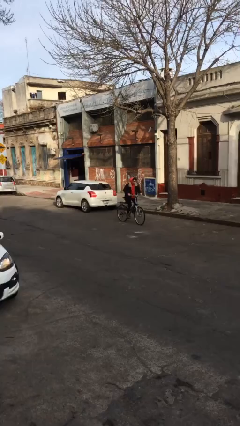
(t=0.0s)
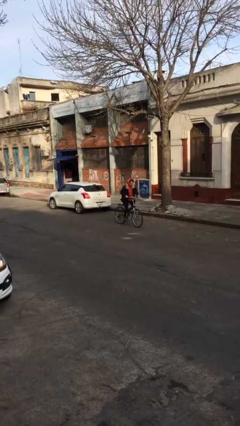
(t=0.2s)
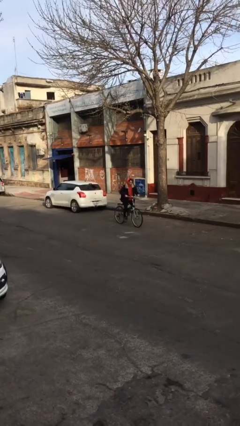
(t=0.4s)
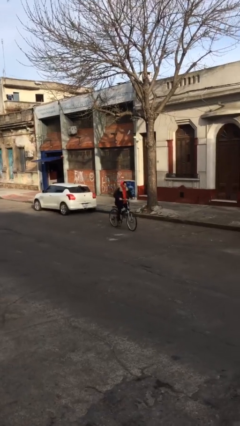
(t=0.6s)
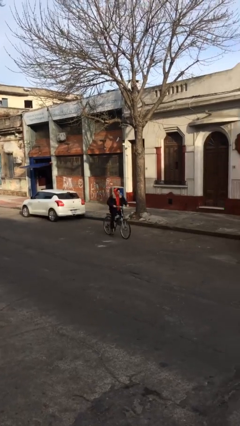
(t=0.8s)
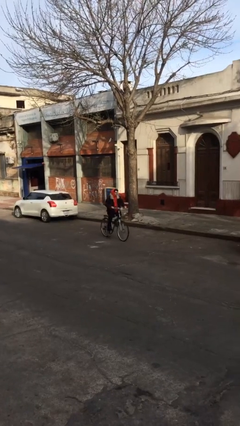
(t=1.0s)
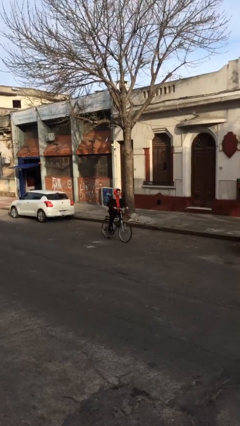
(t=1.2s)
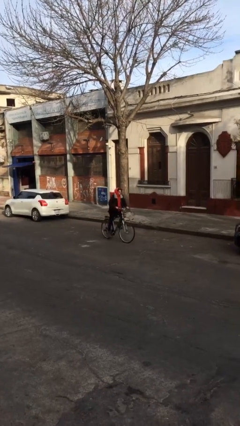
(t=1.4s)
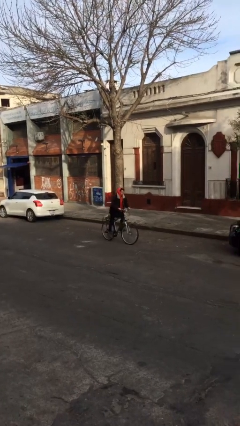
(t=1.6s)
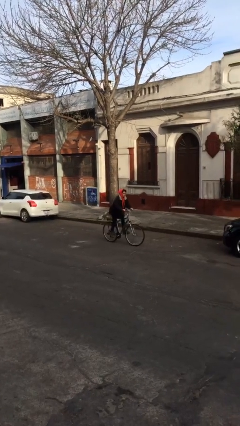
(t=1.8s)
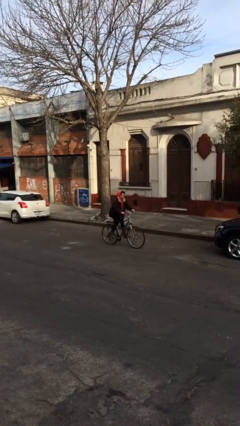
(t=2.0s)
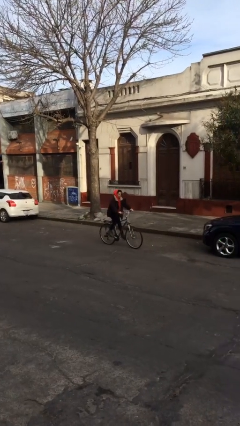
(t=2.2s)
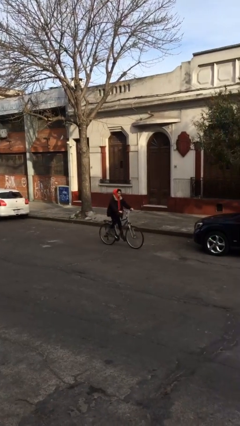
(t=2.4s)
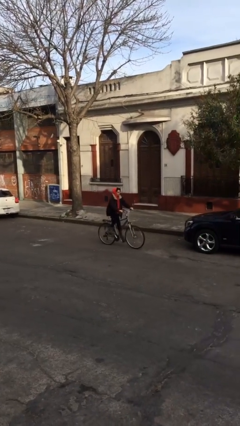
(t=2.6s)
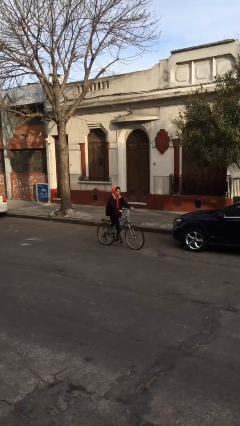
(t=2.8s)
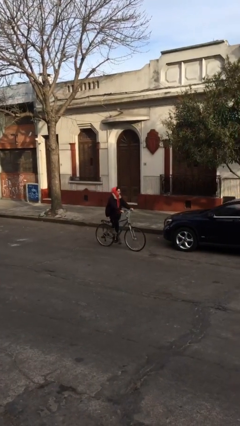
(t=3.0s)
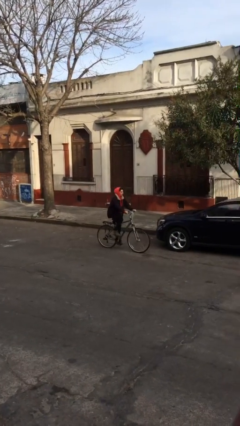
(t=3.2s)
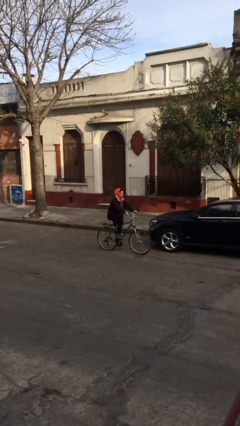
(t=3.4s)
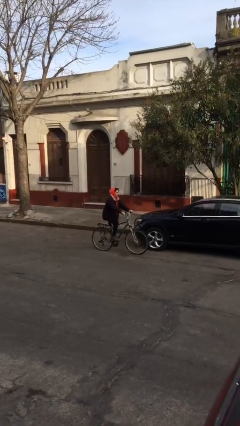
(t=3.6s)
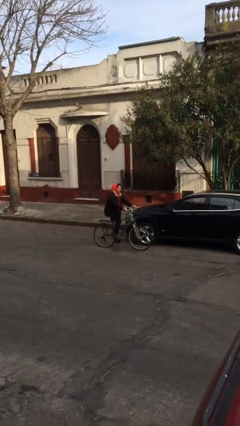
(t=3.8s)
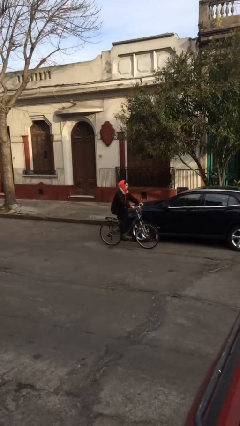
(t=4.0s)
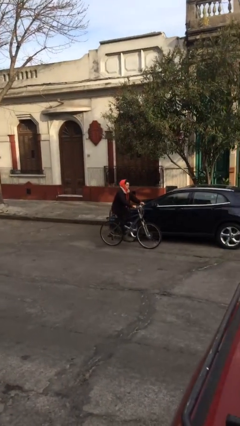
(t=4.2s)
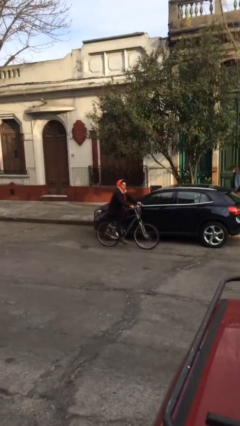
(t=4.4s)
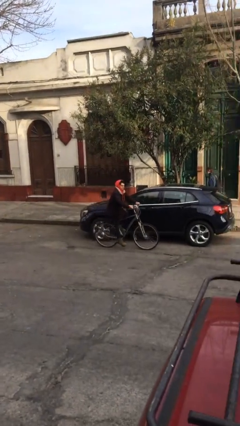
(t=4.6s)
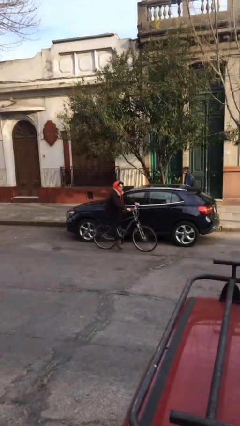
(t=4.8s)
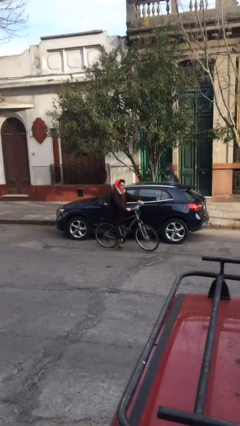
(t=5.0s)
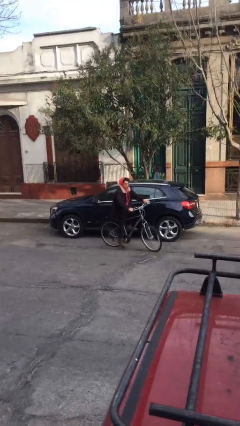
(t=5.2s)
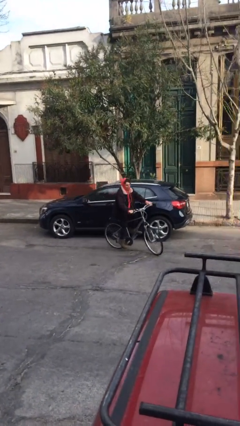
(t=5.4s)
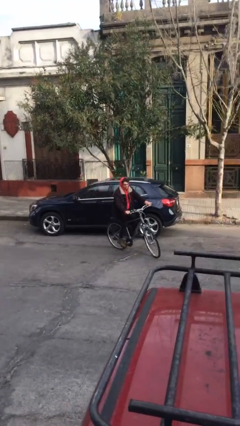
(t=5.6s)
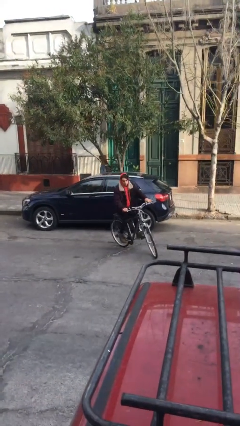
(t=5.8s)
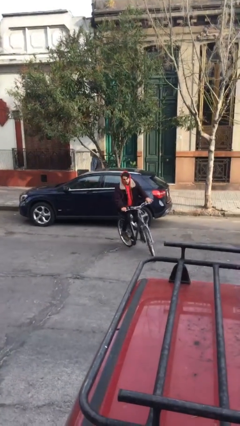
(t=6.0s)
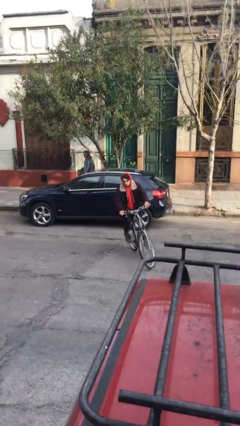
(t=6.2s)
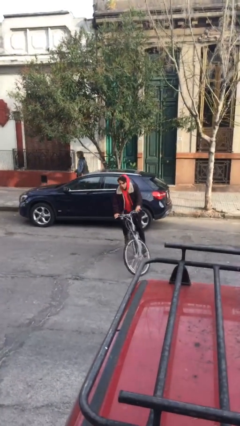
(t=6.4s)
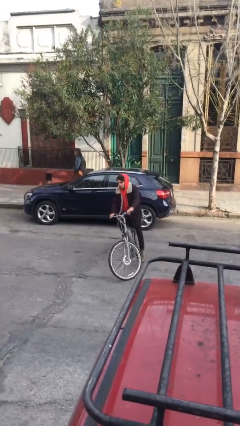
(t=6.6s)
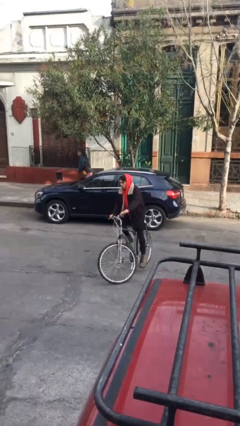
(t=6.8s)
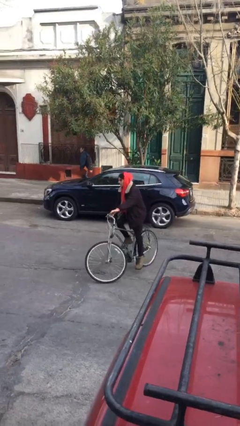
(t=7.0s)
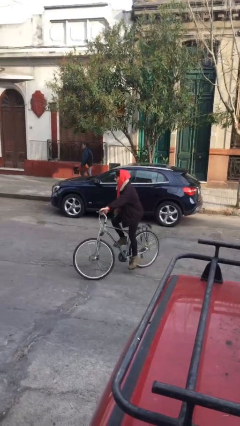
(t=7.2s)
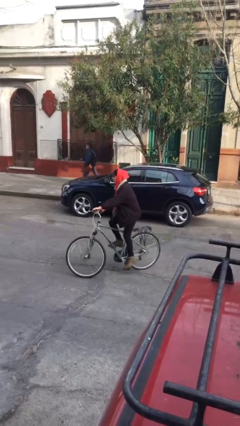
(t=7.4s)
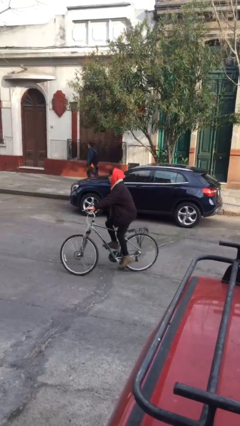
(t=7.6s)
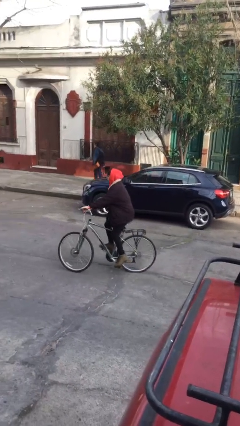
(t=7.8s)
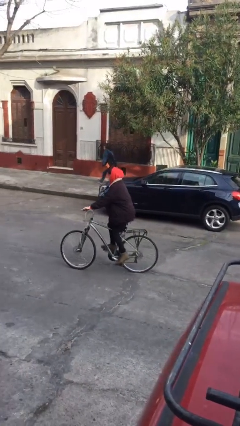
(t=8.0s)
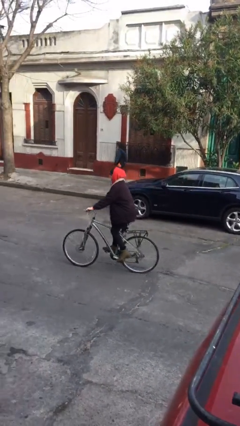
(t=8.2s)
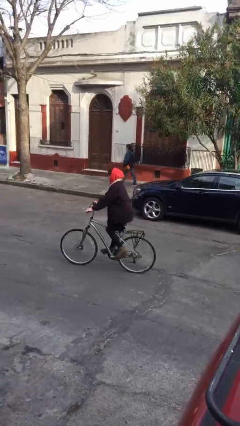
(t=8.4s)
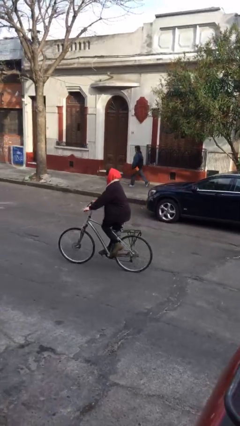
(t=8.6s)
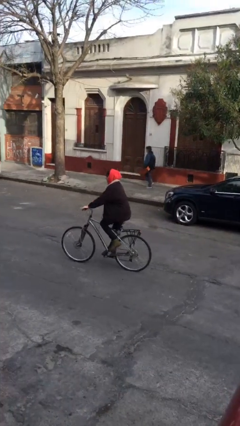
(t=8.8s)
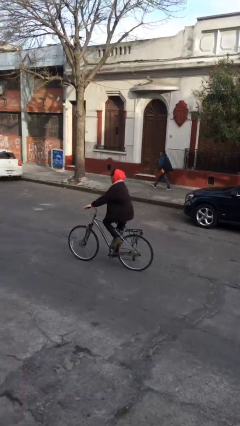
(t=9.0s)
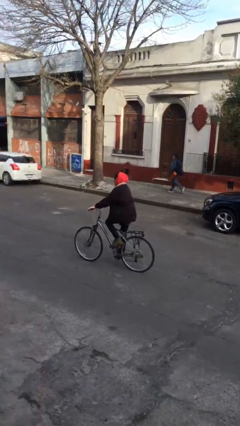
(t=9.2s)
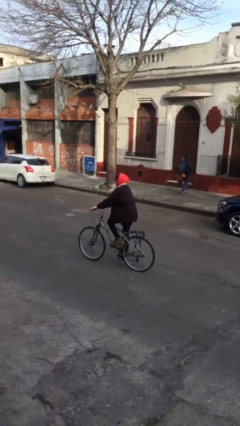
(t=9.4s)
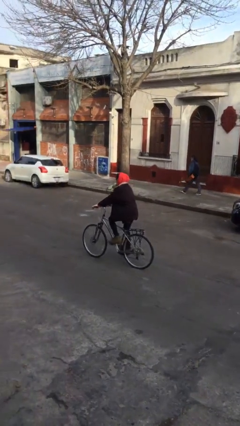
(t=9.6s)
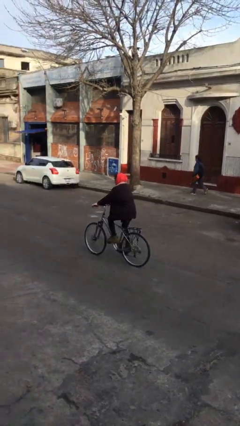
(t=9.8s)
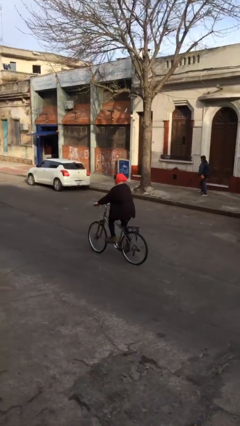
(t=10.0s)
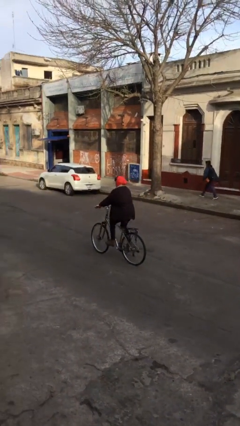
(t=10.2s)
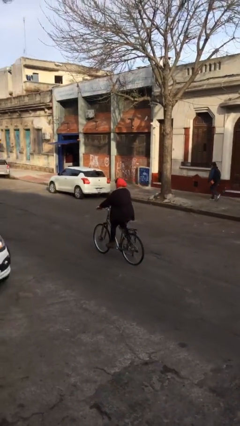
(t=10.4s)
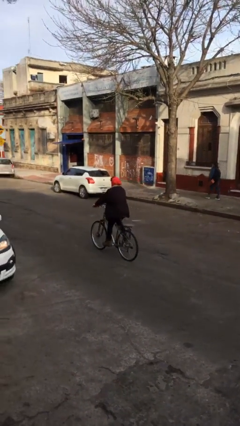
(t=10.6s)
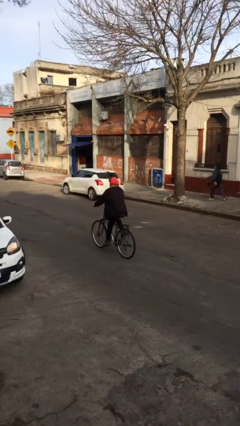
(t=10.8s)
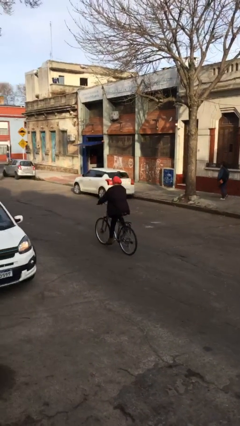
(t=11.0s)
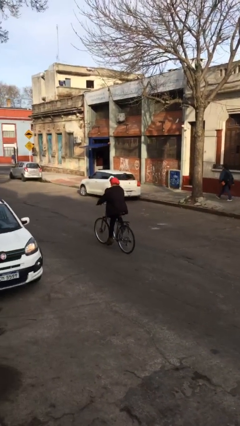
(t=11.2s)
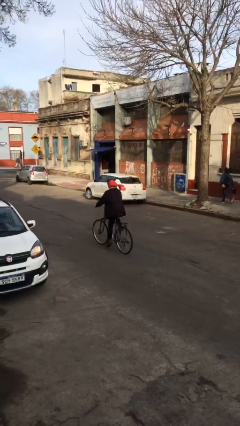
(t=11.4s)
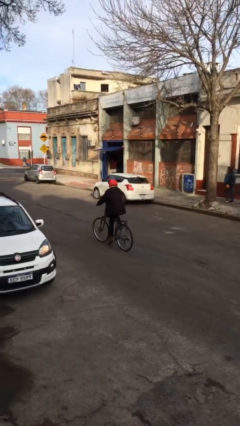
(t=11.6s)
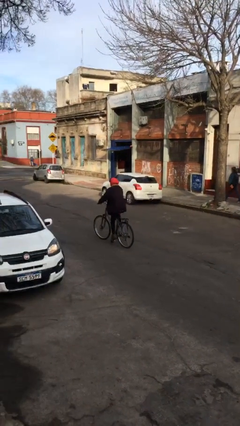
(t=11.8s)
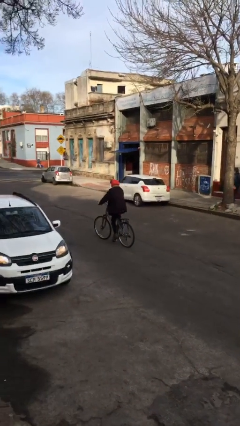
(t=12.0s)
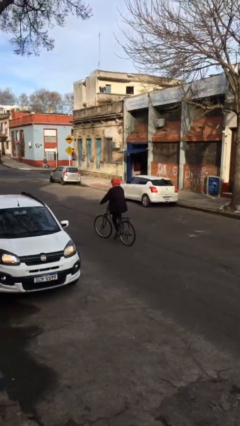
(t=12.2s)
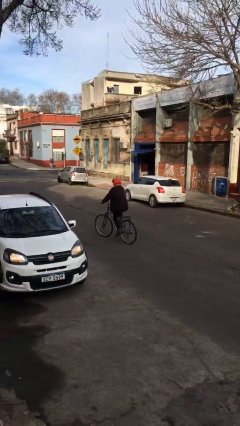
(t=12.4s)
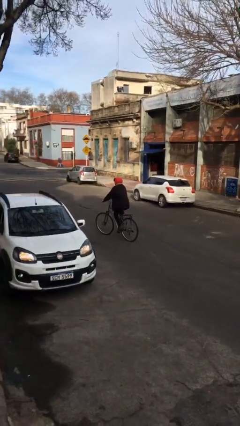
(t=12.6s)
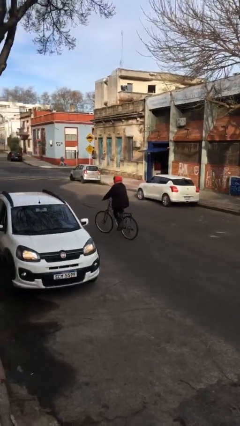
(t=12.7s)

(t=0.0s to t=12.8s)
person rides bicycle

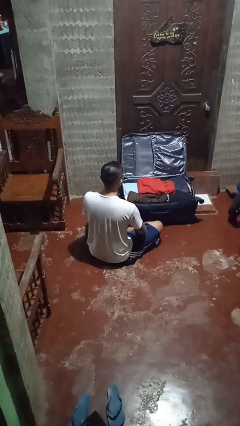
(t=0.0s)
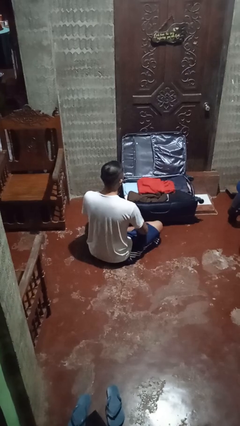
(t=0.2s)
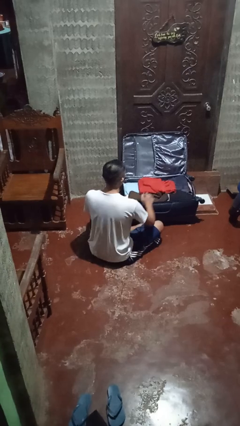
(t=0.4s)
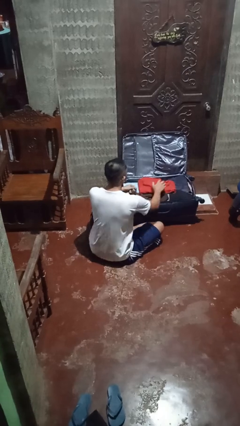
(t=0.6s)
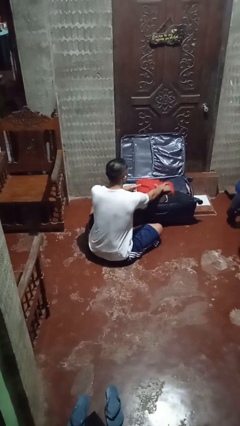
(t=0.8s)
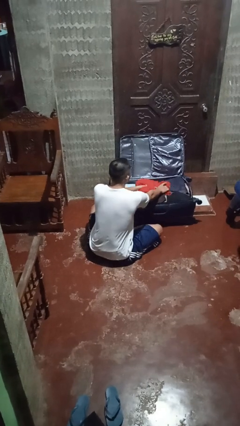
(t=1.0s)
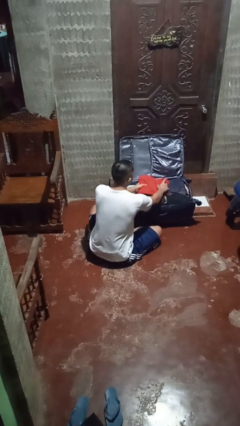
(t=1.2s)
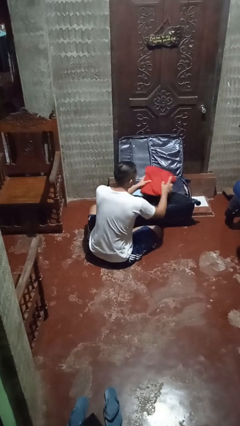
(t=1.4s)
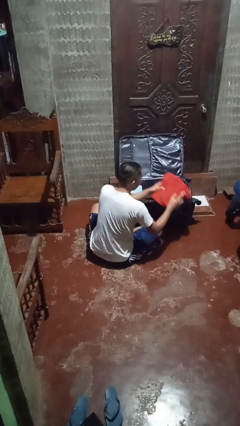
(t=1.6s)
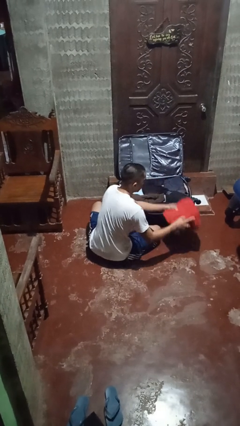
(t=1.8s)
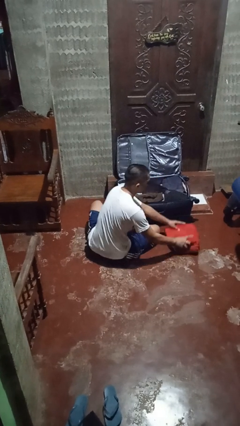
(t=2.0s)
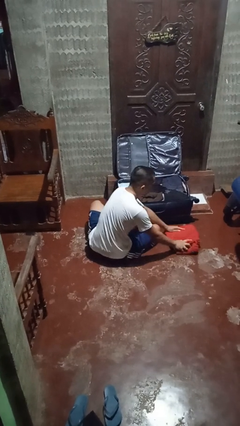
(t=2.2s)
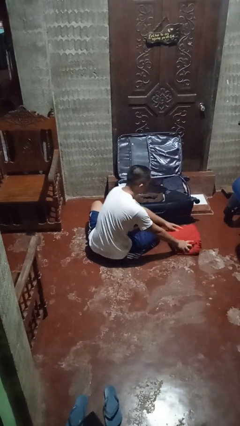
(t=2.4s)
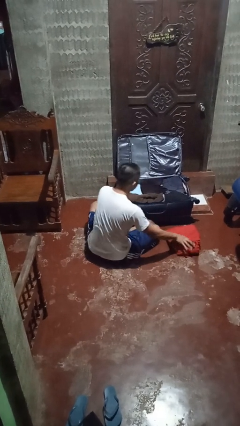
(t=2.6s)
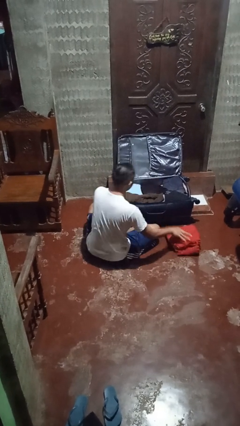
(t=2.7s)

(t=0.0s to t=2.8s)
person unloads clothes from suitcase

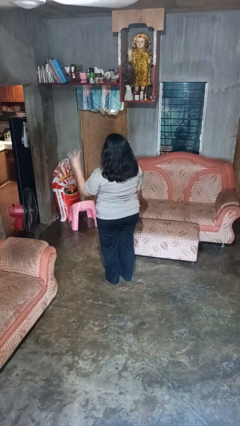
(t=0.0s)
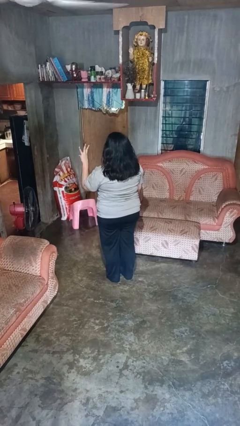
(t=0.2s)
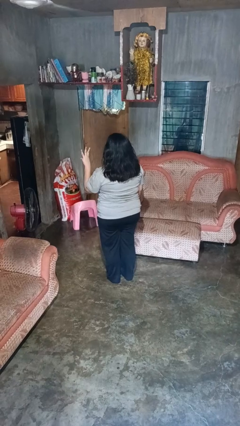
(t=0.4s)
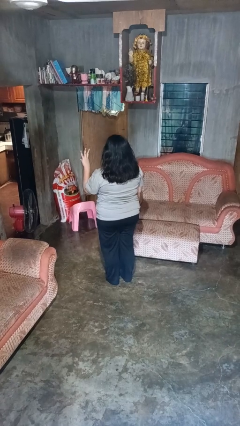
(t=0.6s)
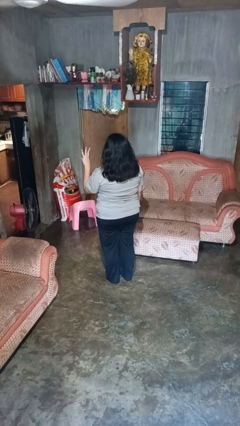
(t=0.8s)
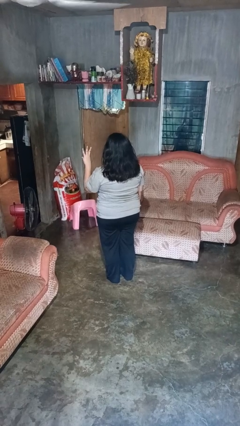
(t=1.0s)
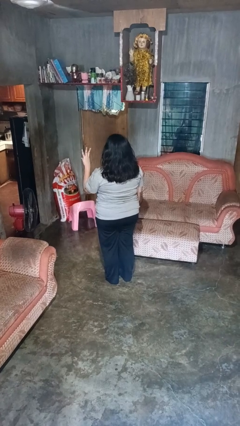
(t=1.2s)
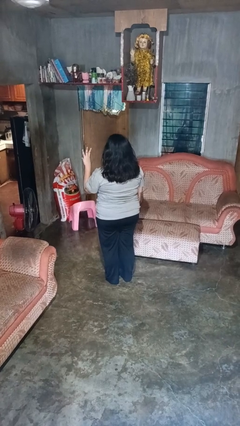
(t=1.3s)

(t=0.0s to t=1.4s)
person gestures number three

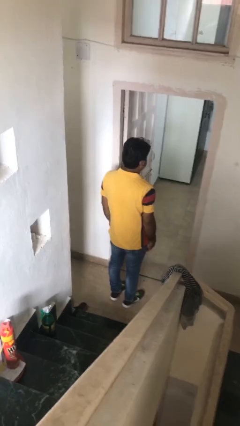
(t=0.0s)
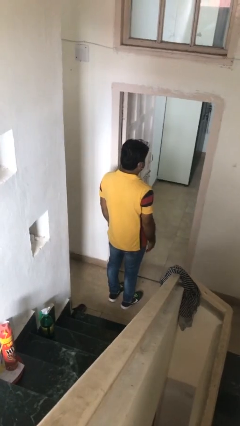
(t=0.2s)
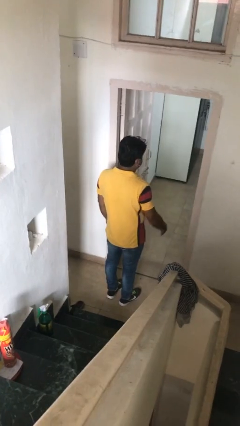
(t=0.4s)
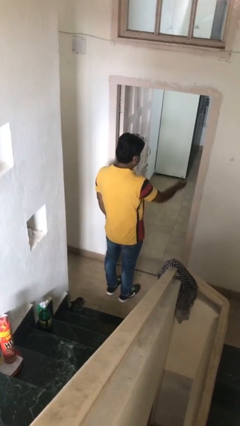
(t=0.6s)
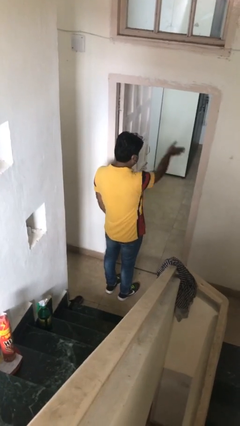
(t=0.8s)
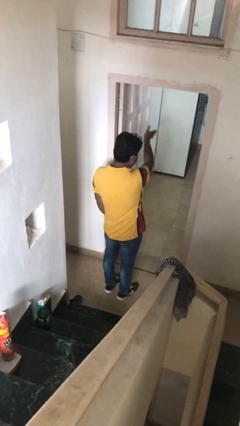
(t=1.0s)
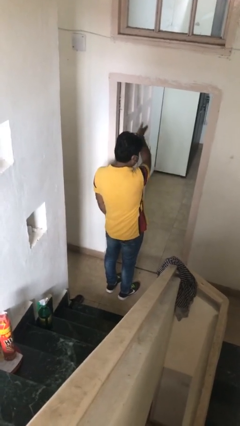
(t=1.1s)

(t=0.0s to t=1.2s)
person gestures swipe left
